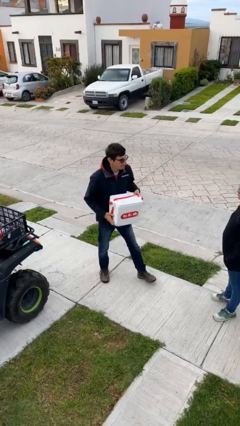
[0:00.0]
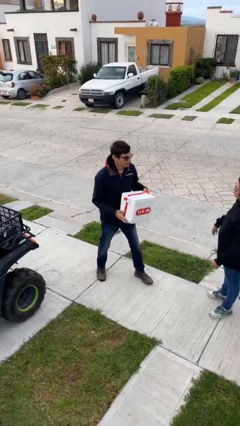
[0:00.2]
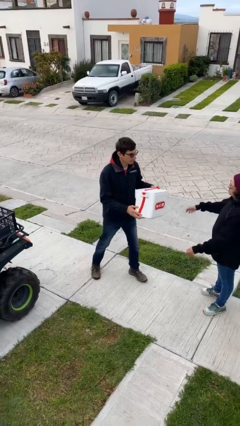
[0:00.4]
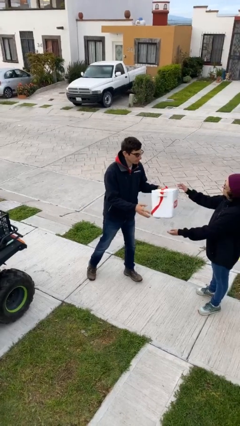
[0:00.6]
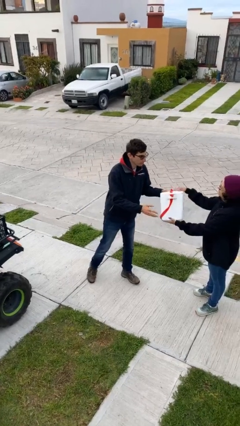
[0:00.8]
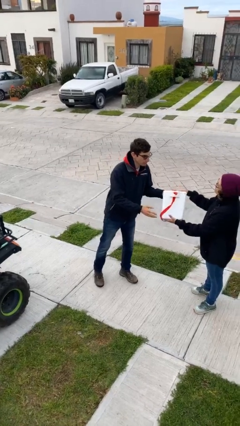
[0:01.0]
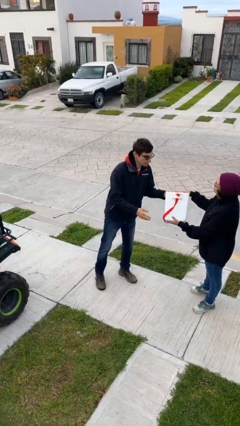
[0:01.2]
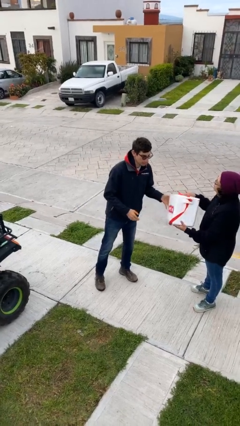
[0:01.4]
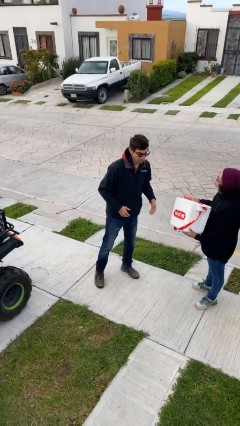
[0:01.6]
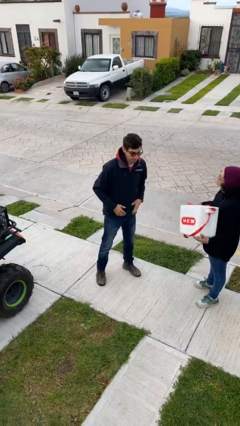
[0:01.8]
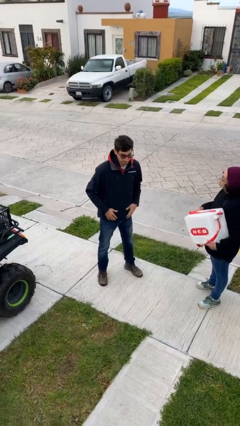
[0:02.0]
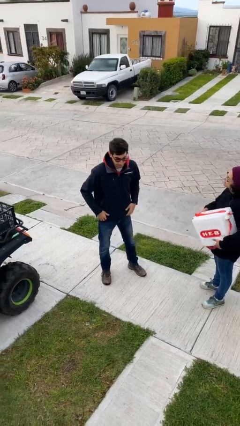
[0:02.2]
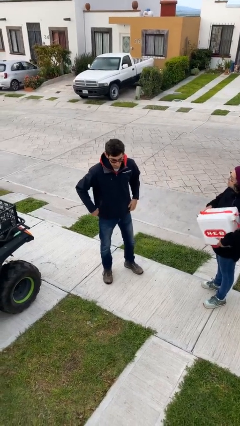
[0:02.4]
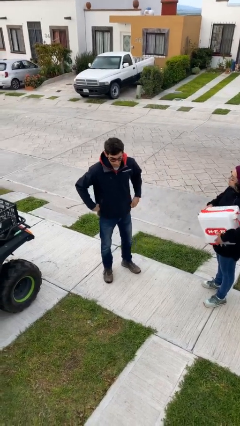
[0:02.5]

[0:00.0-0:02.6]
person transfers object to person

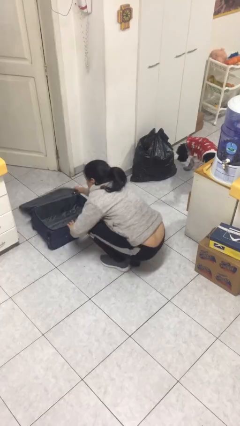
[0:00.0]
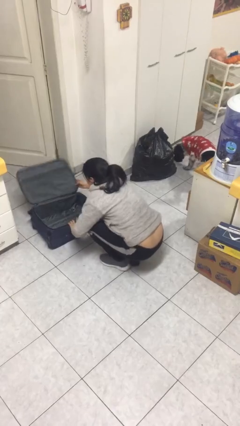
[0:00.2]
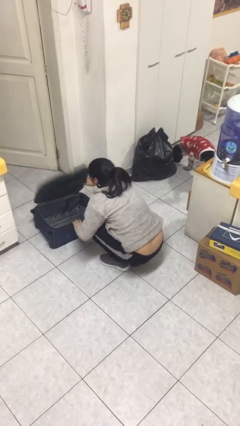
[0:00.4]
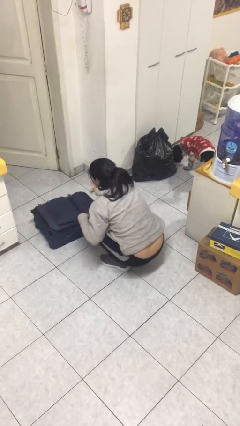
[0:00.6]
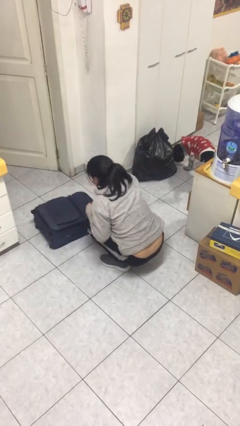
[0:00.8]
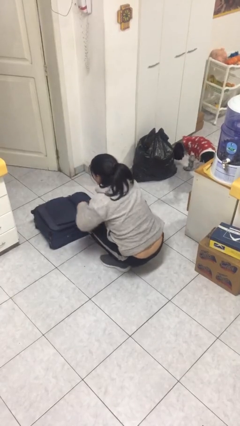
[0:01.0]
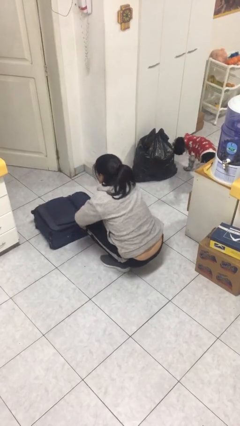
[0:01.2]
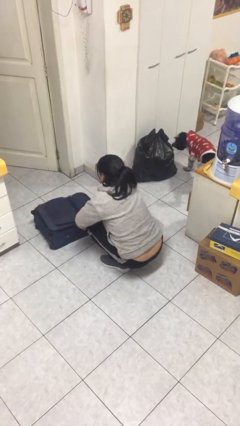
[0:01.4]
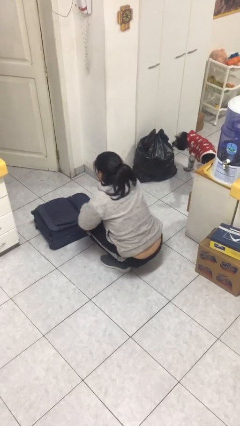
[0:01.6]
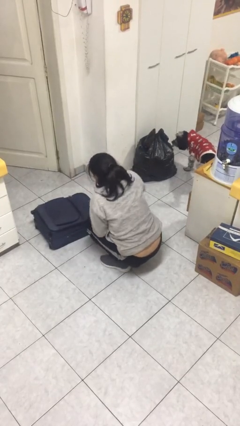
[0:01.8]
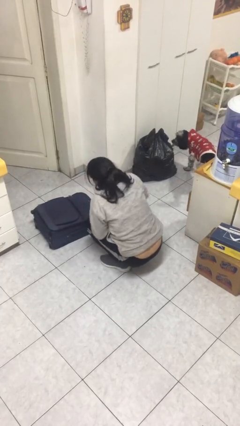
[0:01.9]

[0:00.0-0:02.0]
person closes suitcase

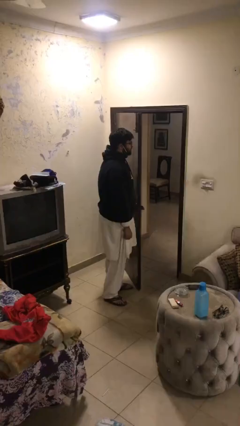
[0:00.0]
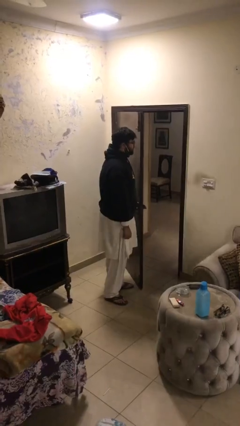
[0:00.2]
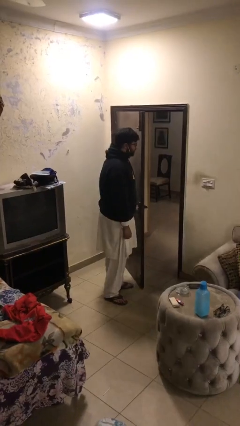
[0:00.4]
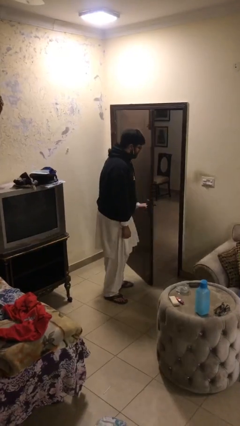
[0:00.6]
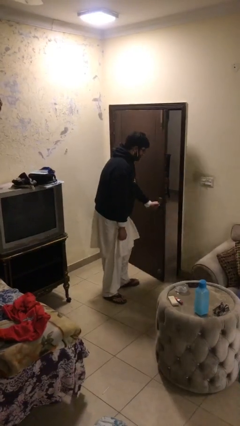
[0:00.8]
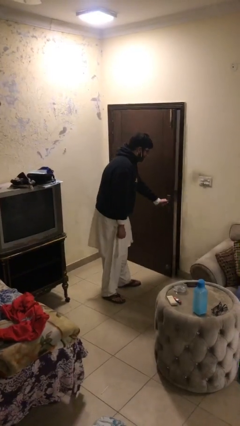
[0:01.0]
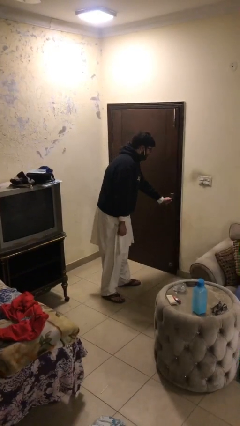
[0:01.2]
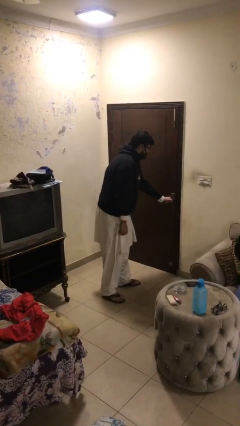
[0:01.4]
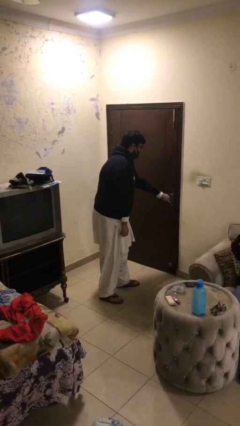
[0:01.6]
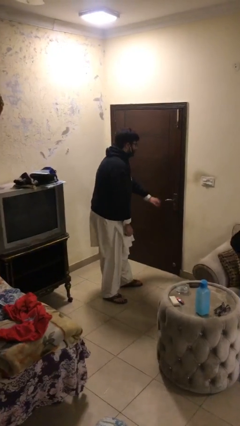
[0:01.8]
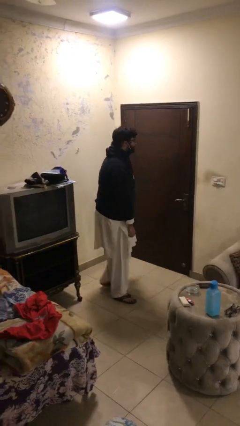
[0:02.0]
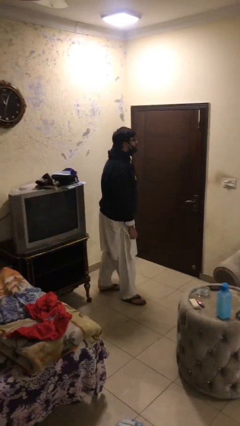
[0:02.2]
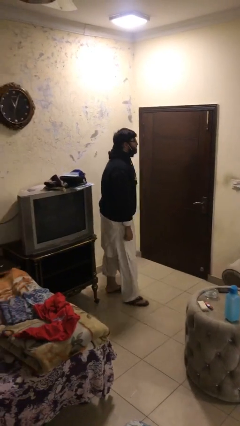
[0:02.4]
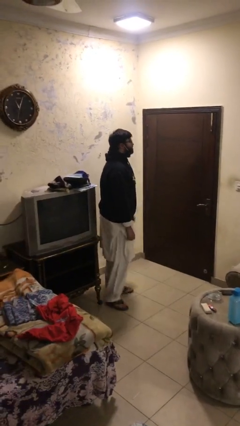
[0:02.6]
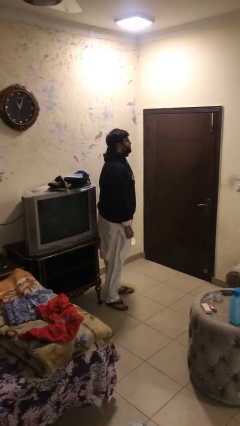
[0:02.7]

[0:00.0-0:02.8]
person closes facility door

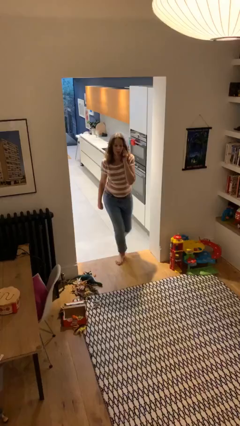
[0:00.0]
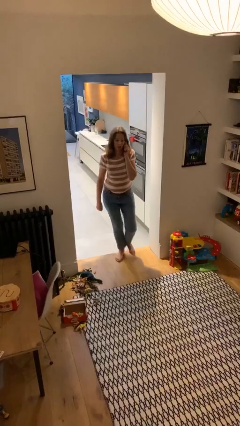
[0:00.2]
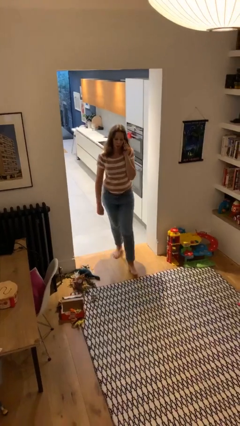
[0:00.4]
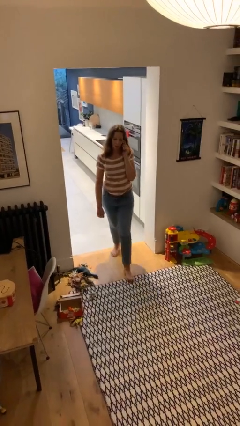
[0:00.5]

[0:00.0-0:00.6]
person enters scene through structure

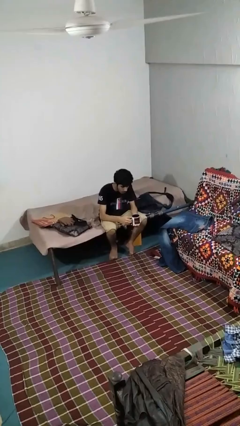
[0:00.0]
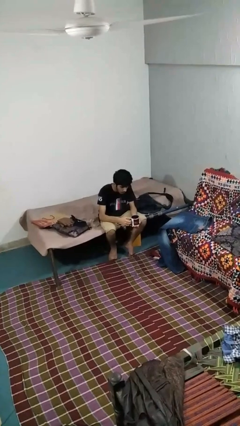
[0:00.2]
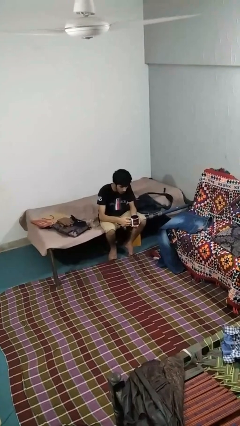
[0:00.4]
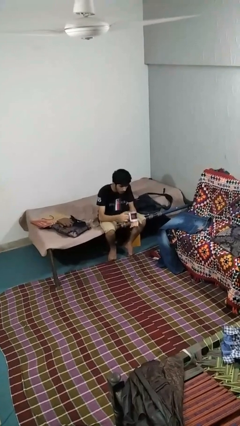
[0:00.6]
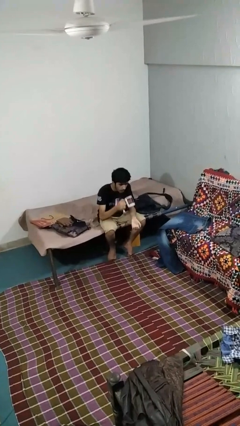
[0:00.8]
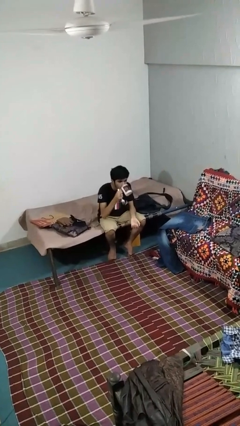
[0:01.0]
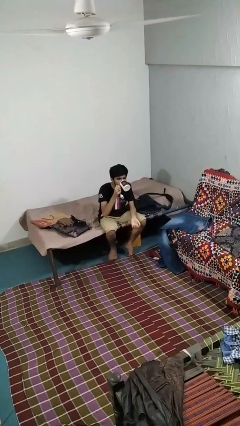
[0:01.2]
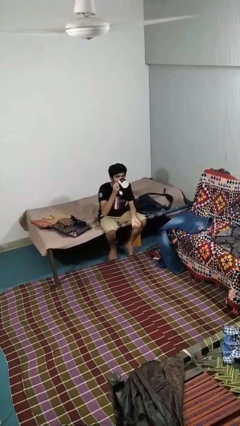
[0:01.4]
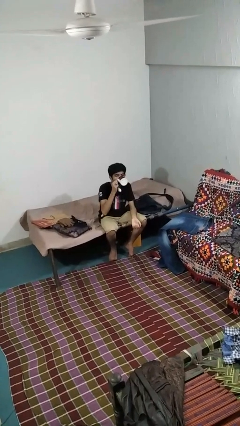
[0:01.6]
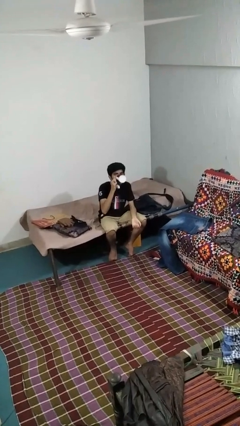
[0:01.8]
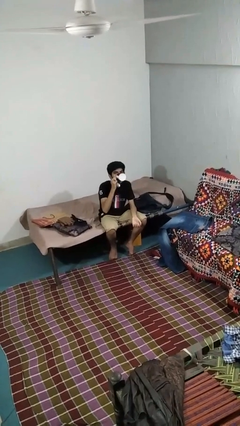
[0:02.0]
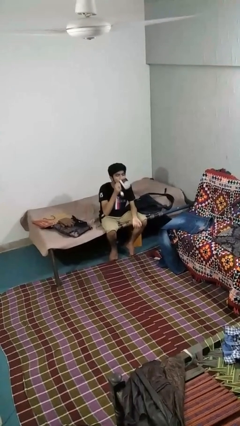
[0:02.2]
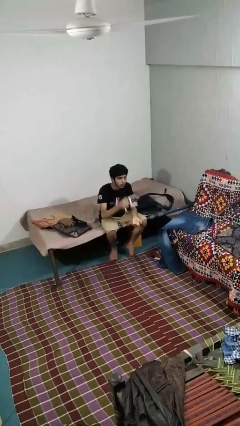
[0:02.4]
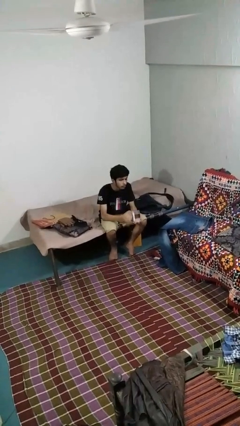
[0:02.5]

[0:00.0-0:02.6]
person drinks from mug

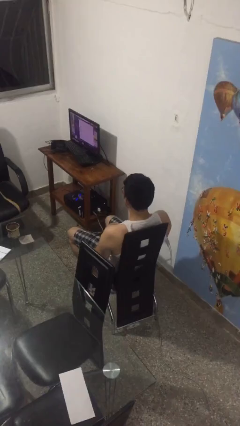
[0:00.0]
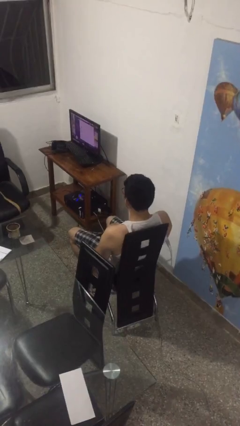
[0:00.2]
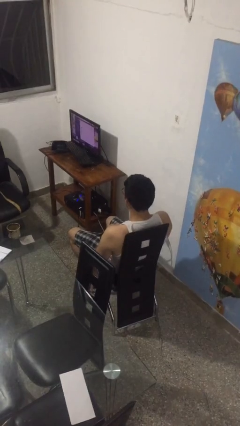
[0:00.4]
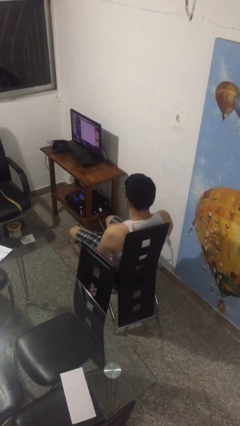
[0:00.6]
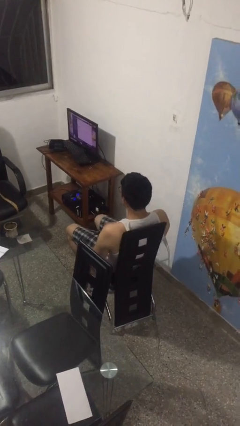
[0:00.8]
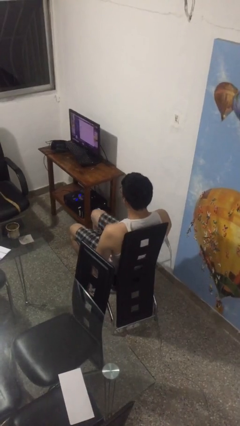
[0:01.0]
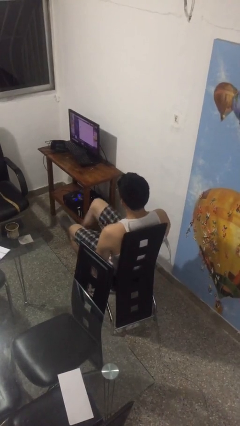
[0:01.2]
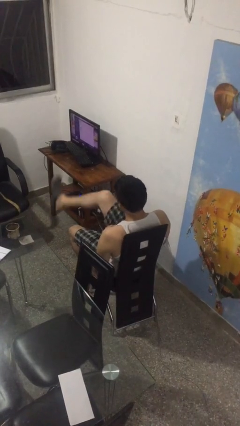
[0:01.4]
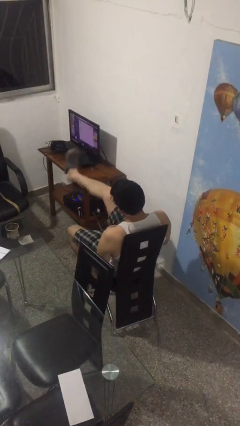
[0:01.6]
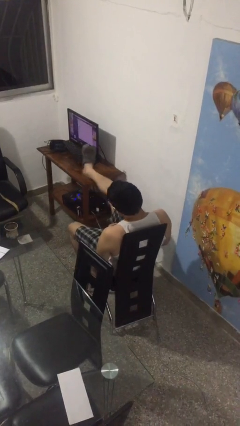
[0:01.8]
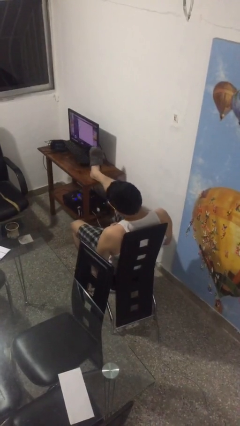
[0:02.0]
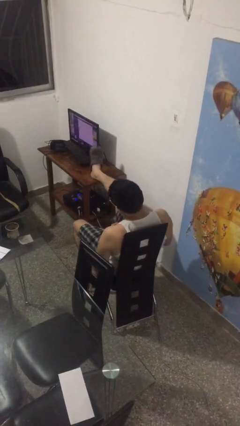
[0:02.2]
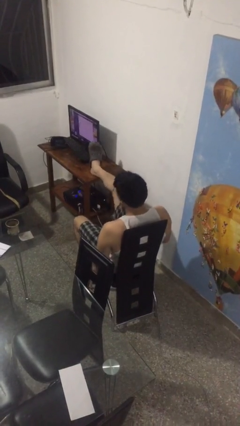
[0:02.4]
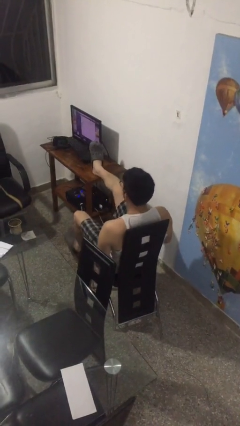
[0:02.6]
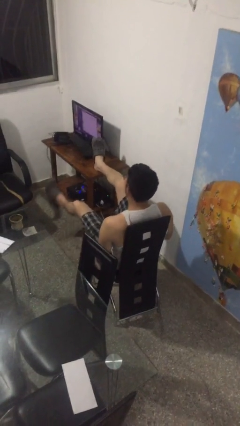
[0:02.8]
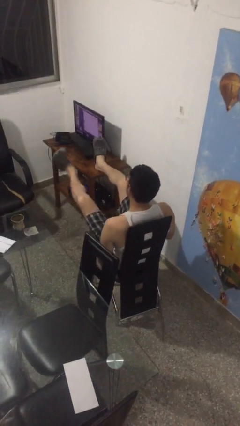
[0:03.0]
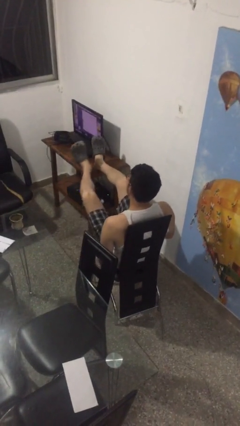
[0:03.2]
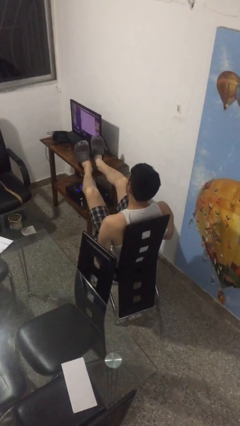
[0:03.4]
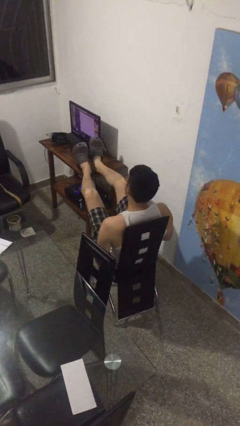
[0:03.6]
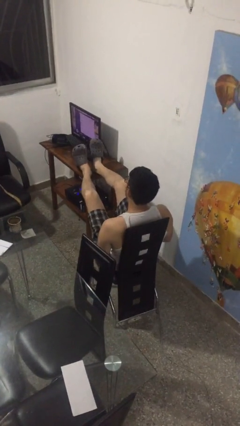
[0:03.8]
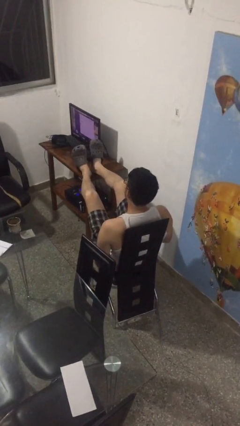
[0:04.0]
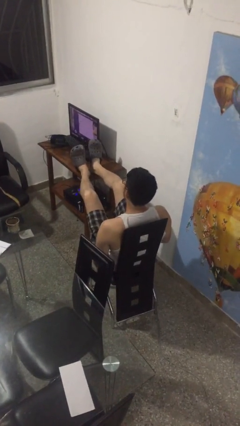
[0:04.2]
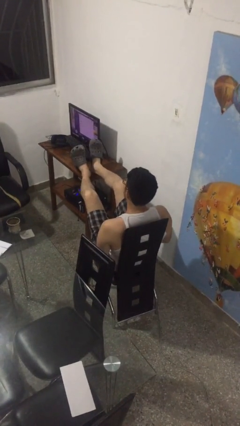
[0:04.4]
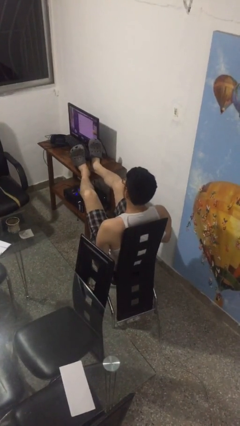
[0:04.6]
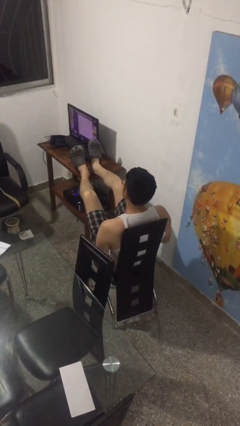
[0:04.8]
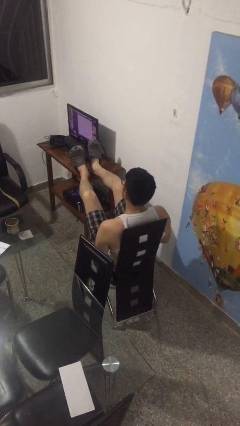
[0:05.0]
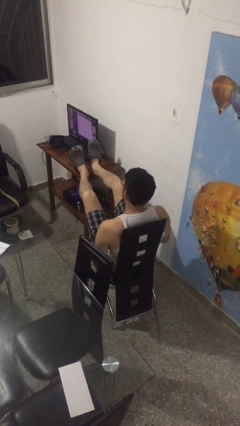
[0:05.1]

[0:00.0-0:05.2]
person puts feet up

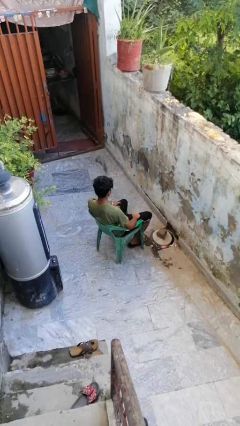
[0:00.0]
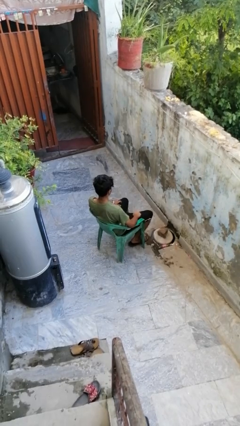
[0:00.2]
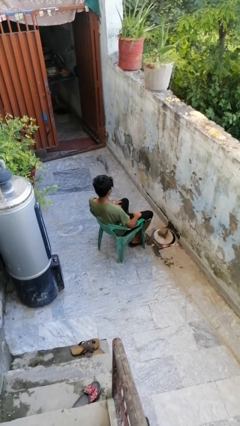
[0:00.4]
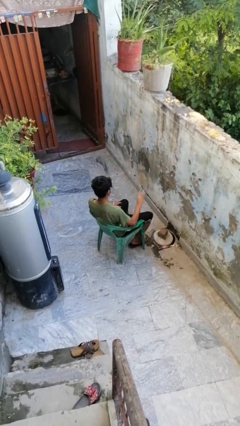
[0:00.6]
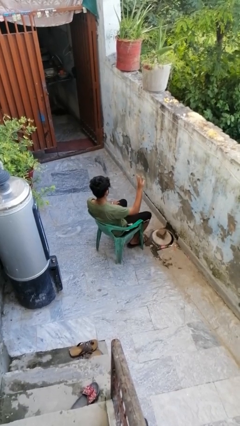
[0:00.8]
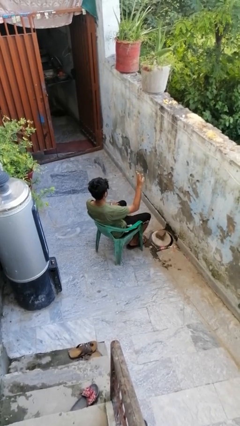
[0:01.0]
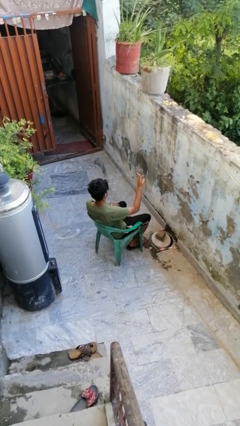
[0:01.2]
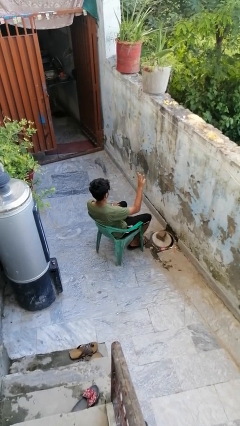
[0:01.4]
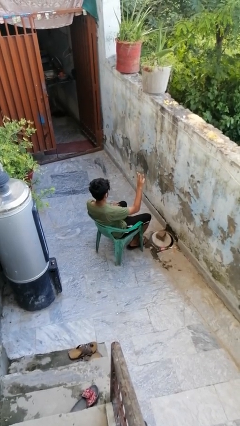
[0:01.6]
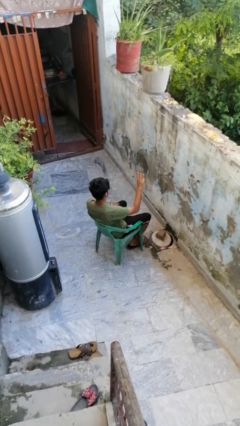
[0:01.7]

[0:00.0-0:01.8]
person gestures number three
